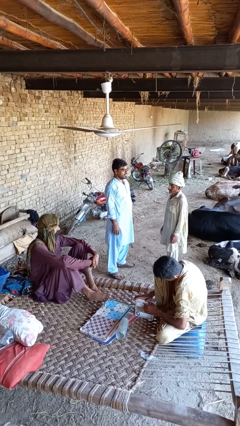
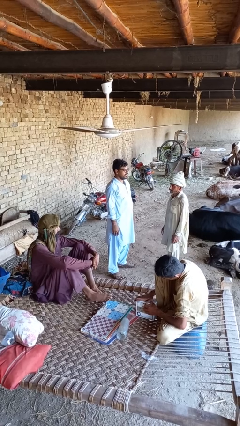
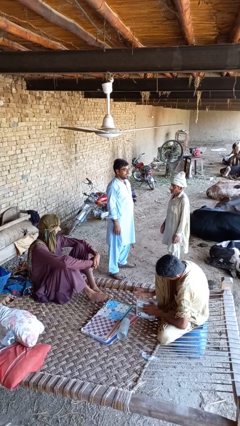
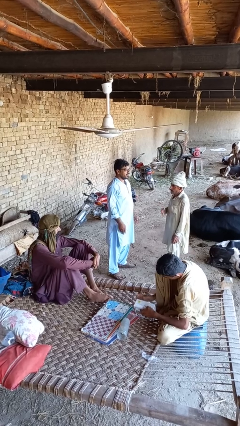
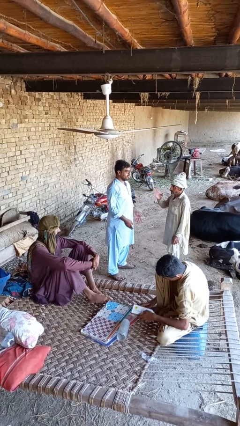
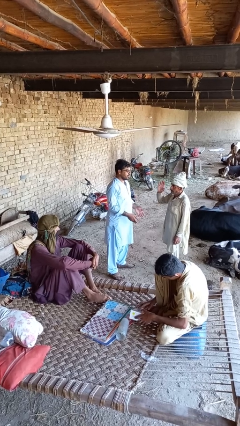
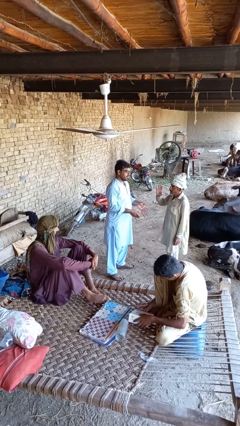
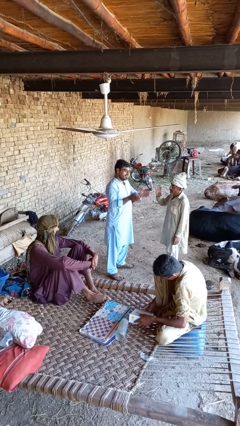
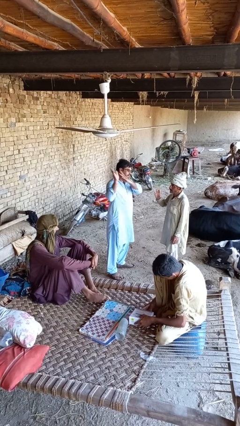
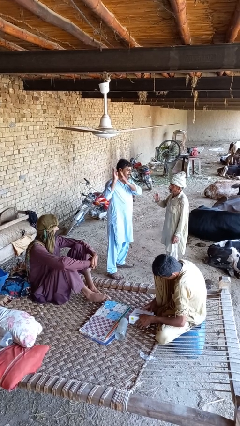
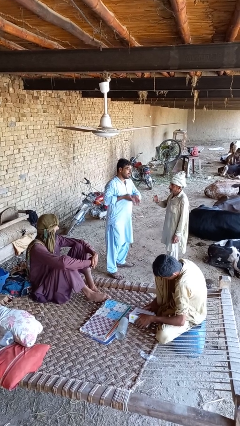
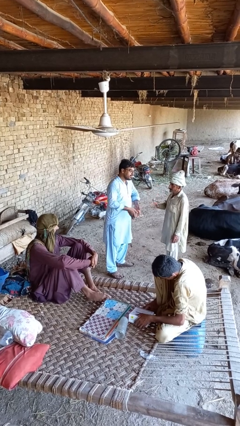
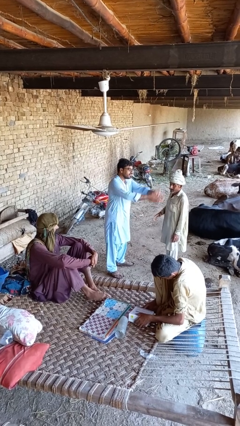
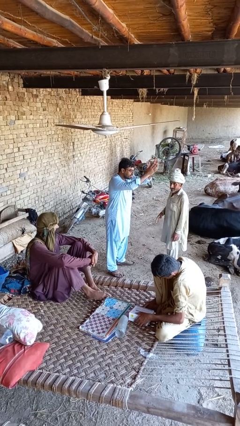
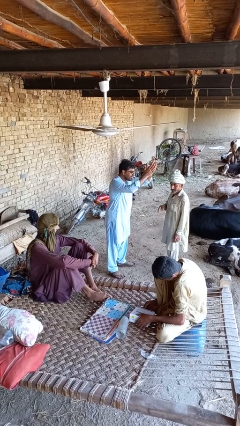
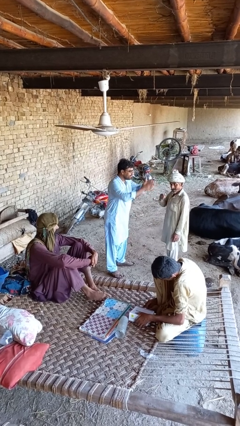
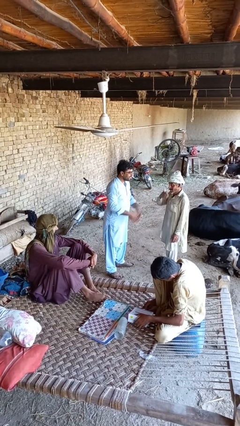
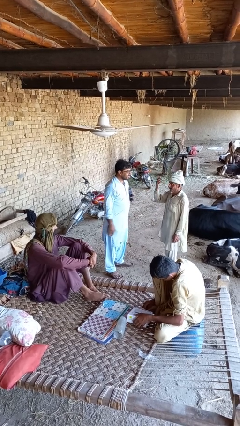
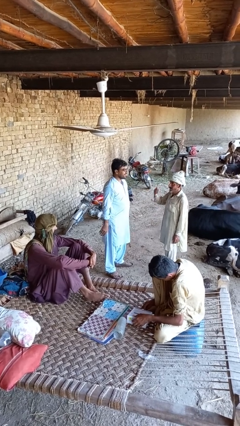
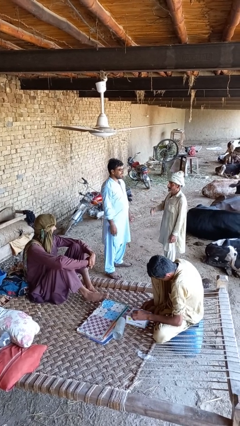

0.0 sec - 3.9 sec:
person shoves person

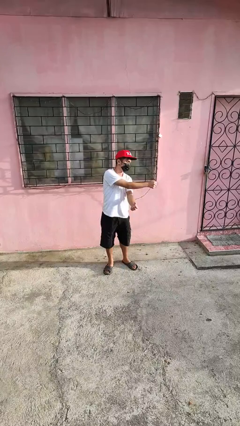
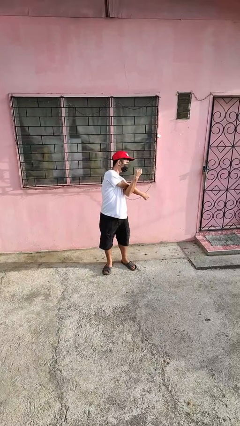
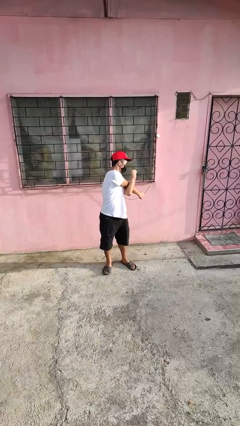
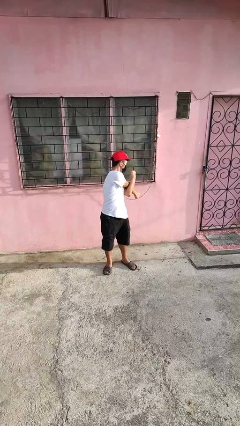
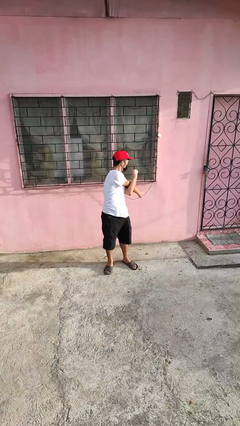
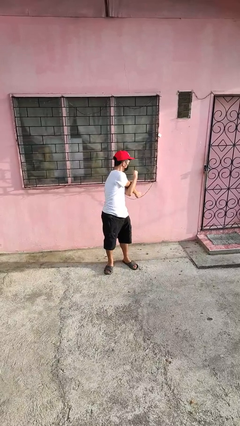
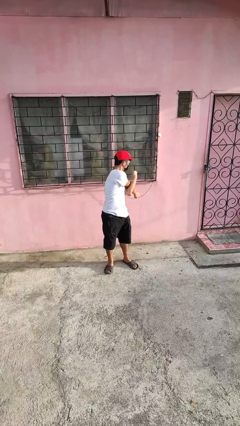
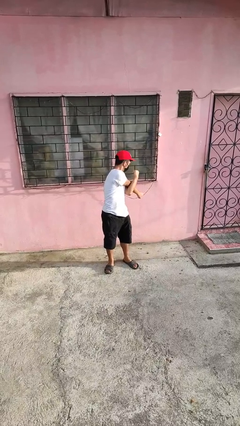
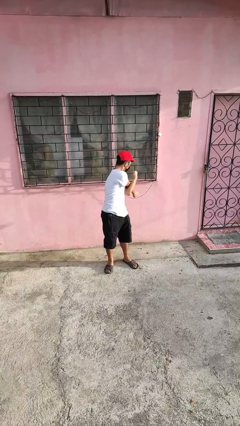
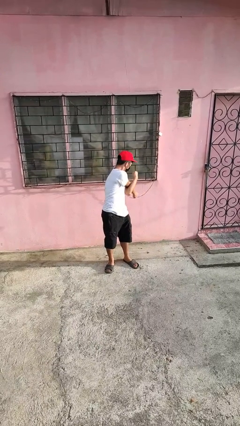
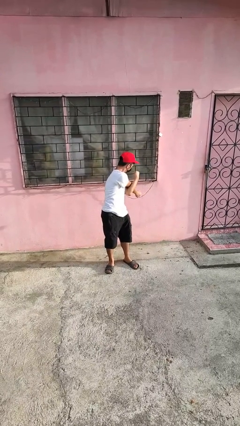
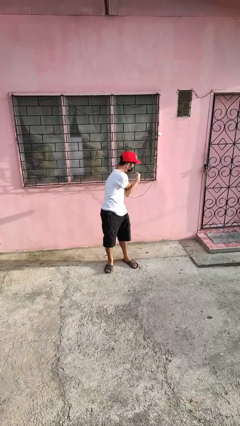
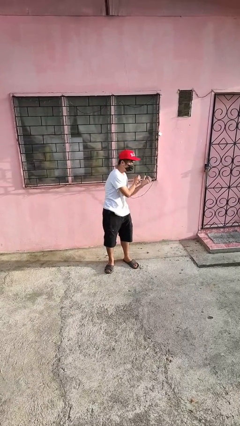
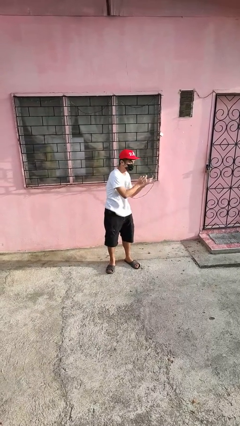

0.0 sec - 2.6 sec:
person stretches arms to side

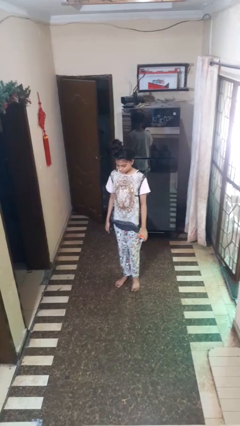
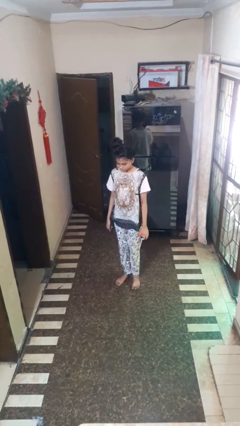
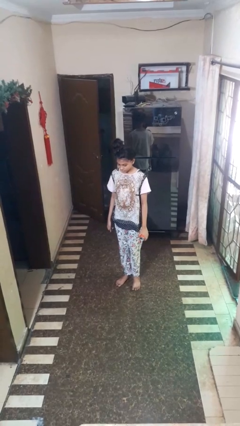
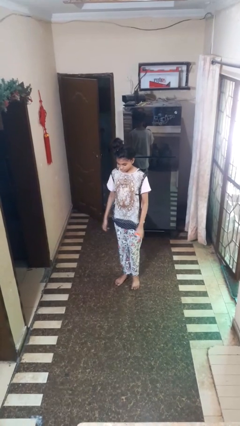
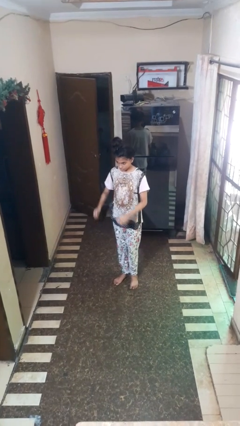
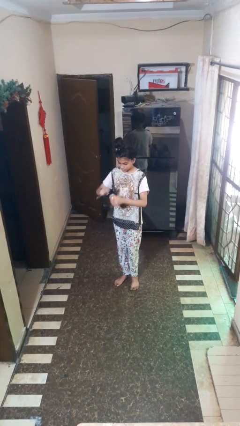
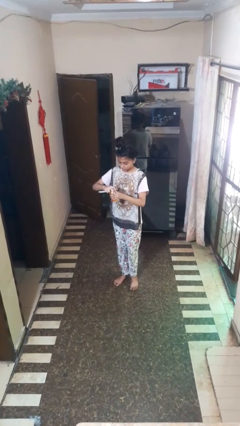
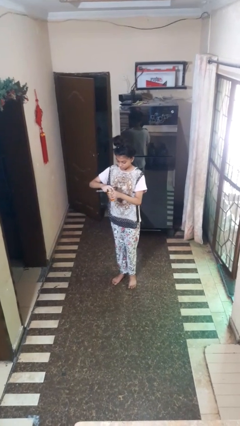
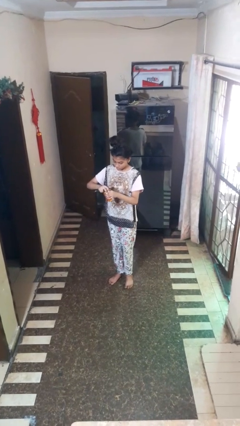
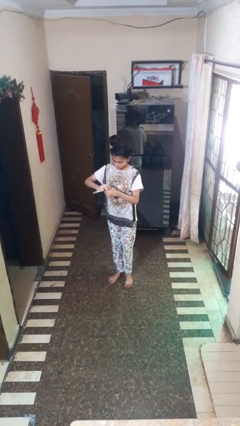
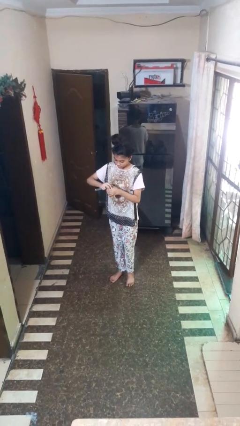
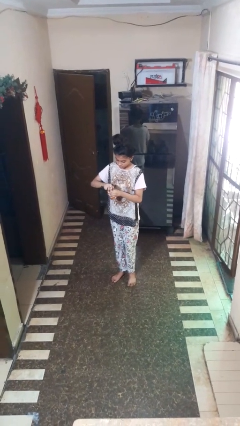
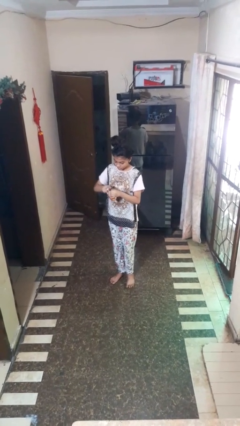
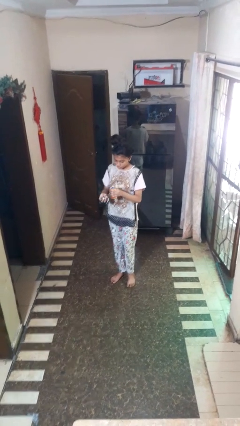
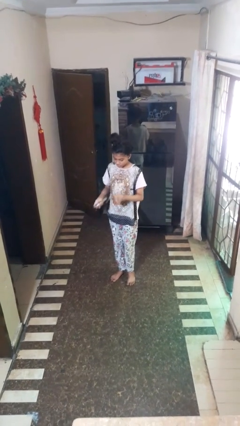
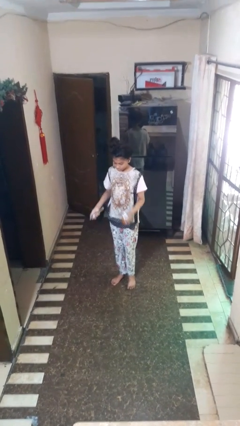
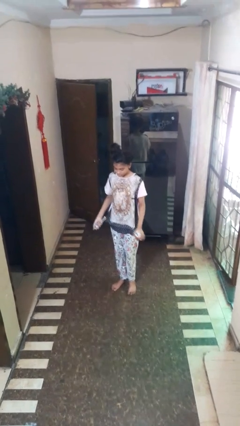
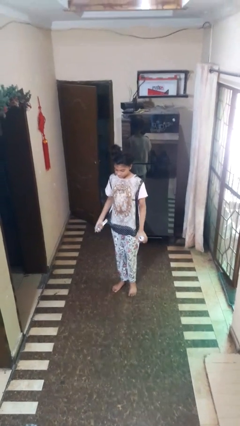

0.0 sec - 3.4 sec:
person opens can with can opener

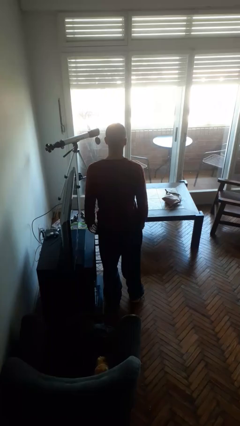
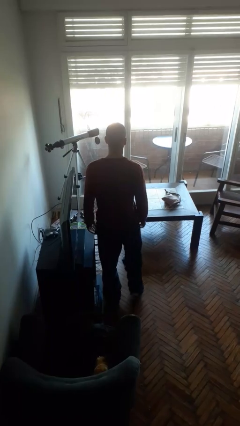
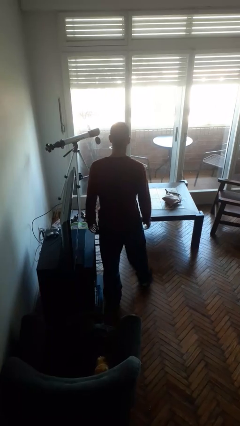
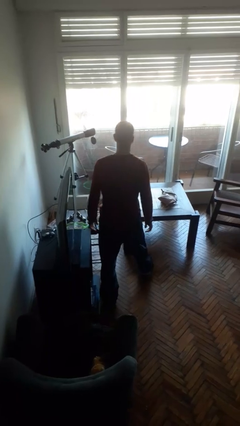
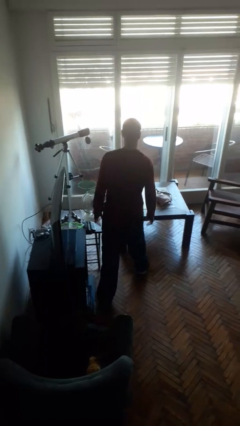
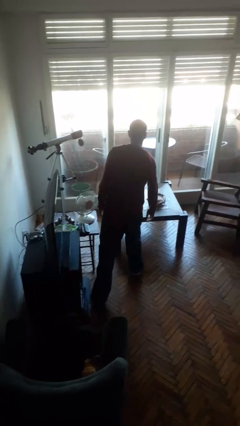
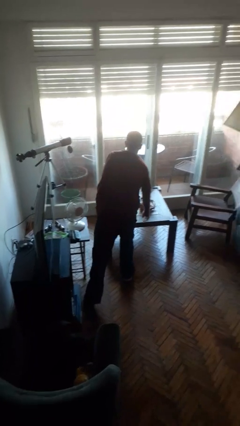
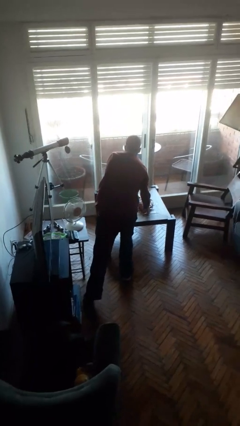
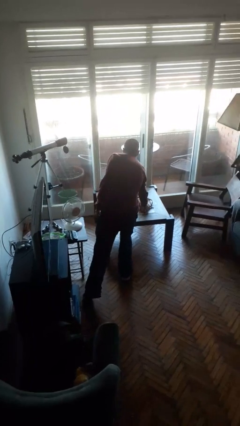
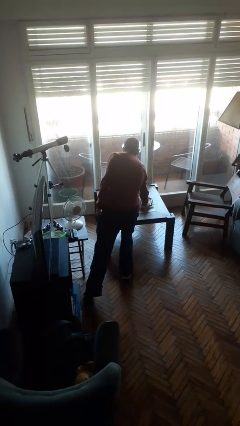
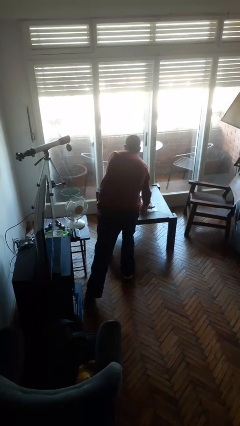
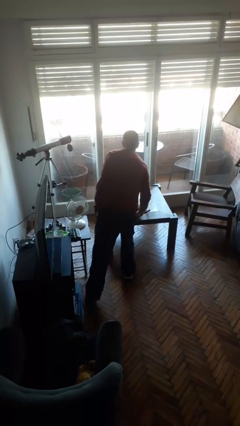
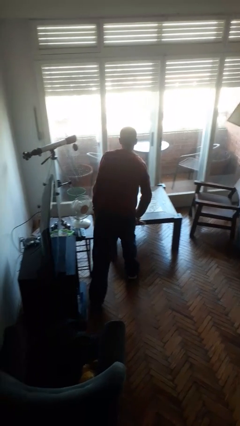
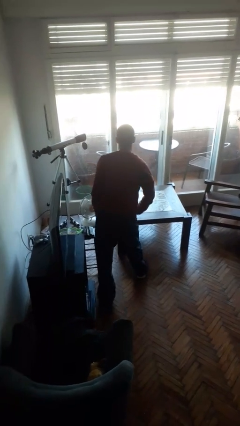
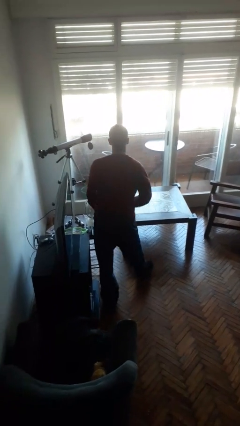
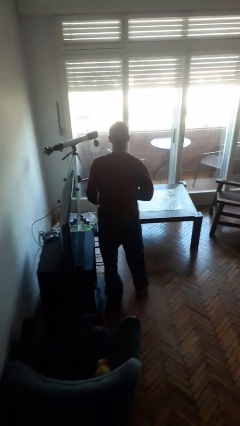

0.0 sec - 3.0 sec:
person picks up object from table

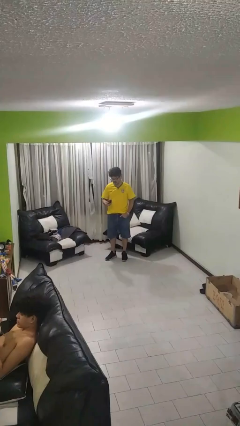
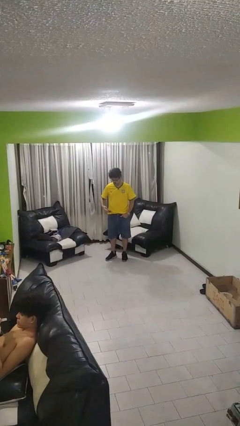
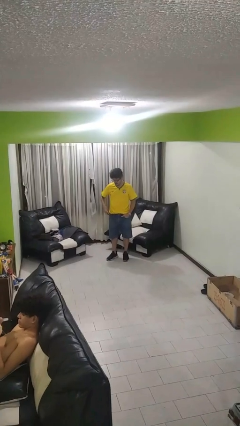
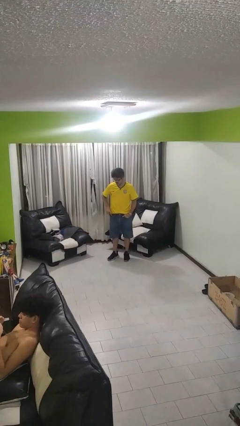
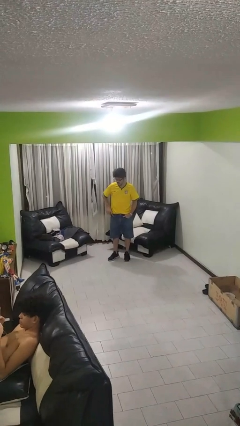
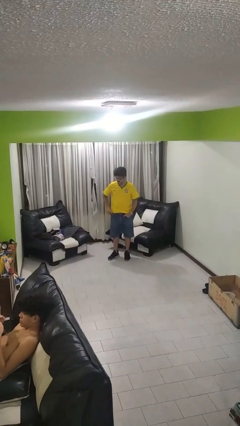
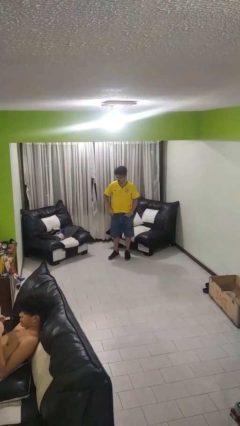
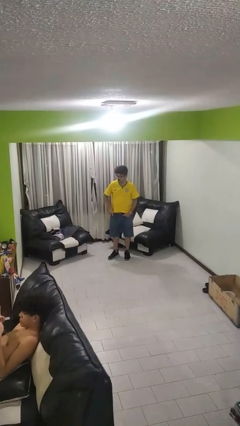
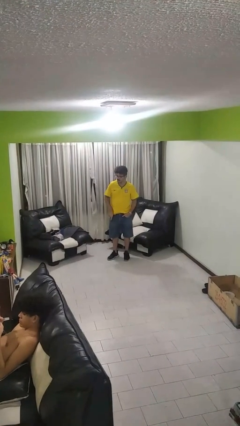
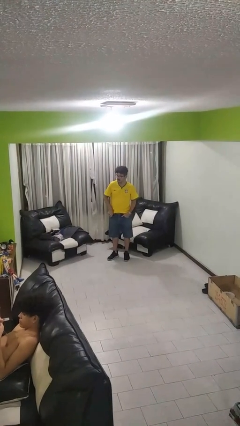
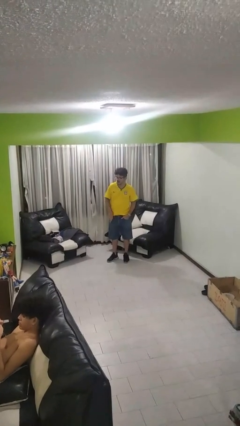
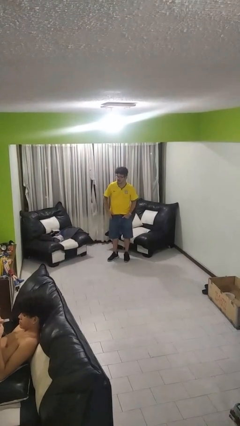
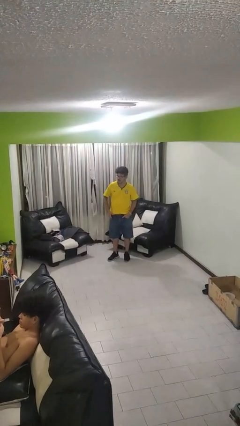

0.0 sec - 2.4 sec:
person puts phone into pocket

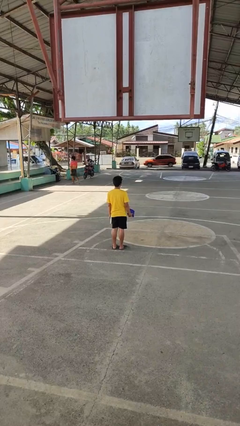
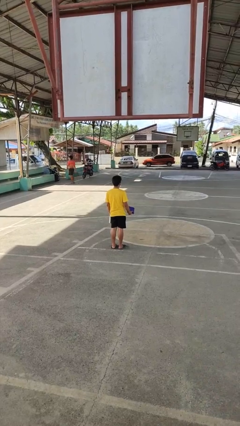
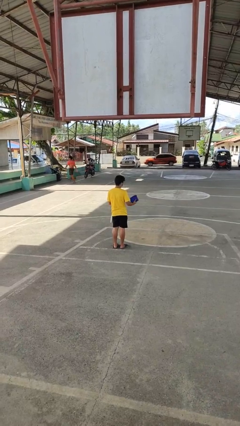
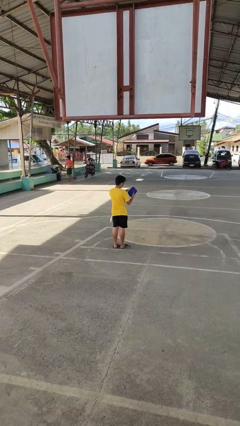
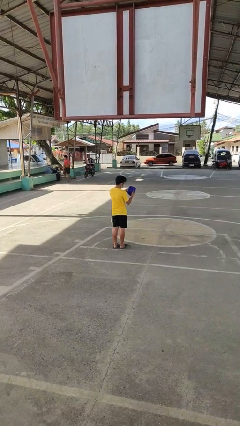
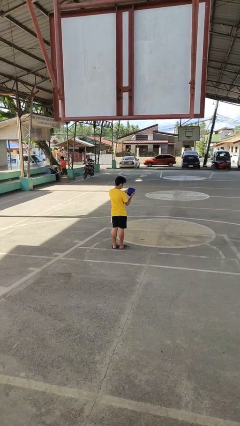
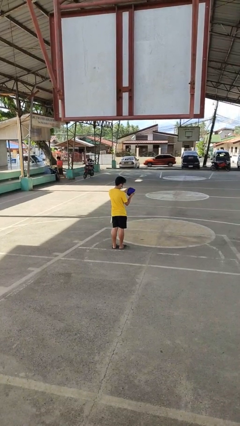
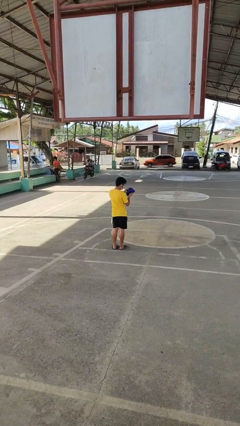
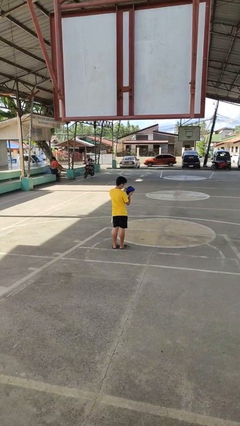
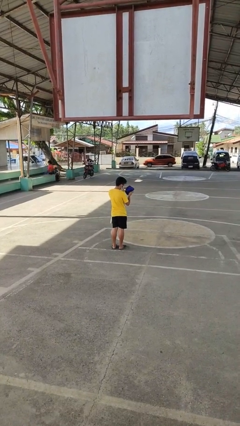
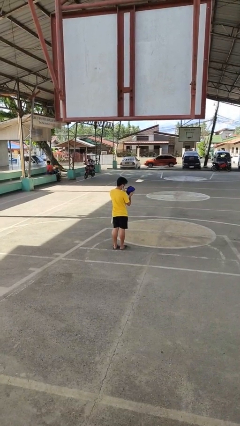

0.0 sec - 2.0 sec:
person searches in purse

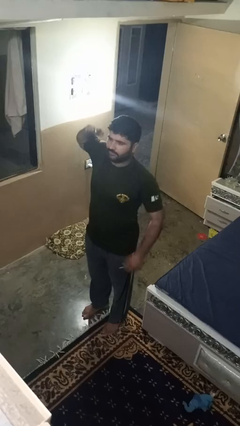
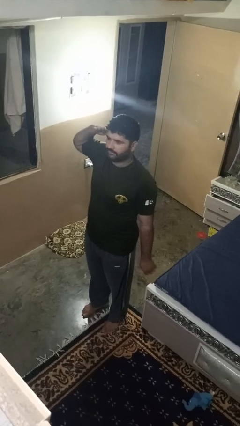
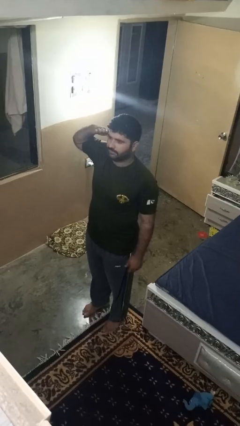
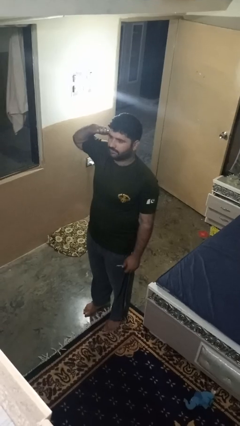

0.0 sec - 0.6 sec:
person salutes
